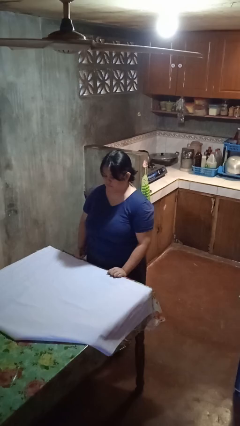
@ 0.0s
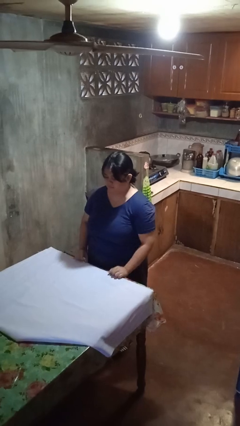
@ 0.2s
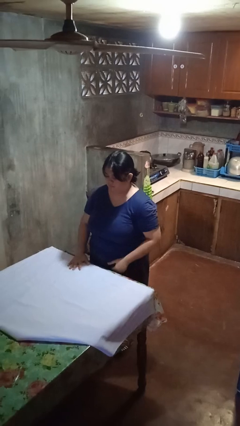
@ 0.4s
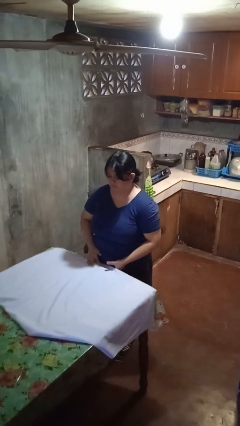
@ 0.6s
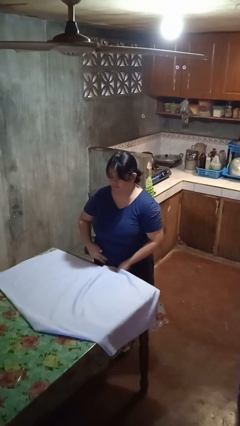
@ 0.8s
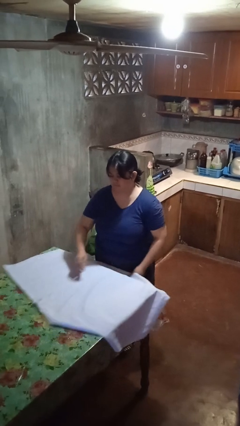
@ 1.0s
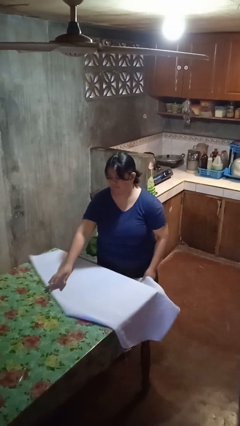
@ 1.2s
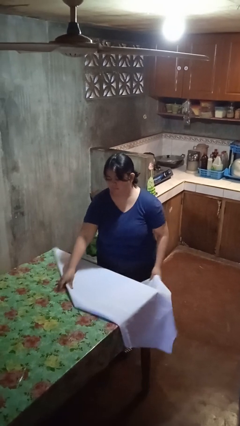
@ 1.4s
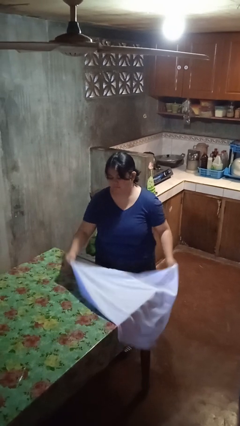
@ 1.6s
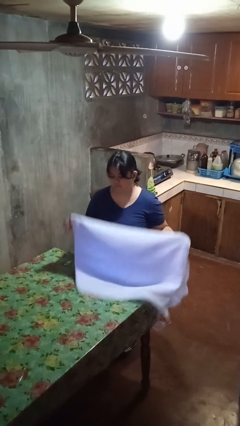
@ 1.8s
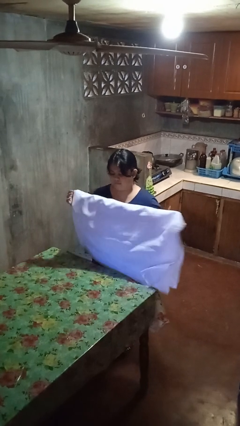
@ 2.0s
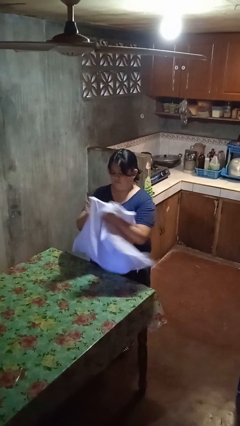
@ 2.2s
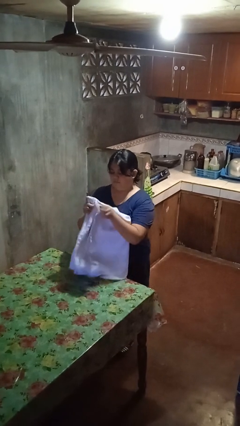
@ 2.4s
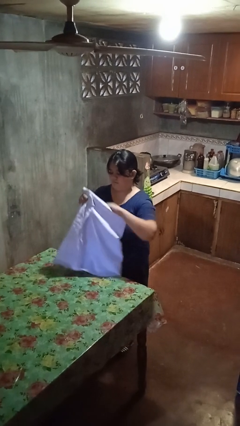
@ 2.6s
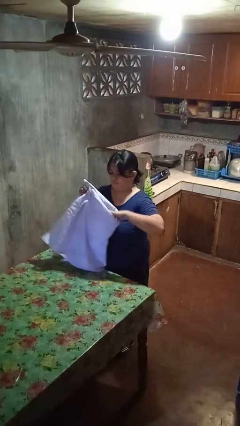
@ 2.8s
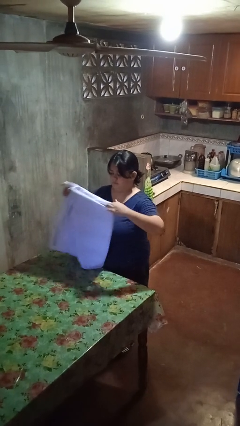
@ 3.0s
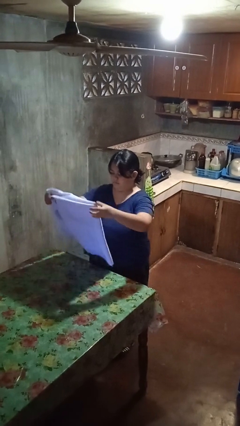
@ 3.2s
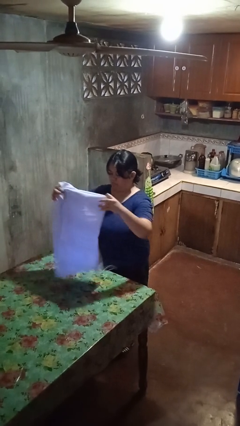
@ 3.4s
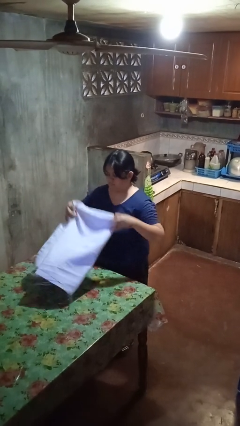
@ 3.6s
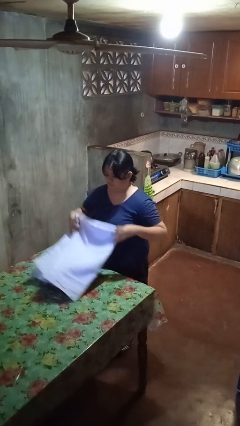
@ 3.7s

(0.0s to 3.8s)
person folds tablecloth

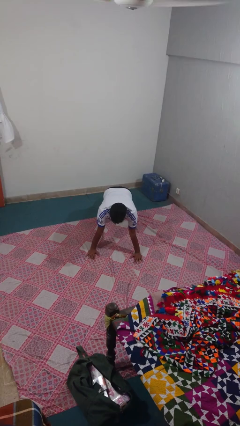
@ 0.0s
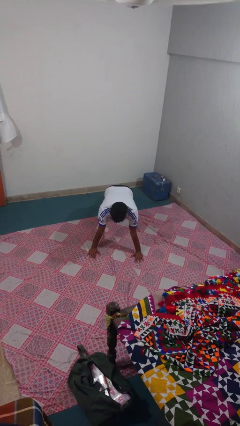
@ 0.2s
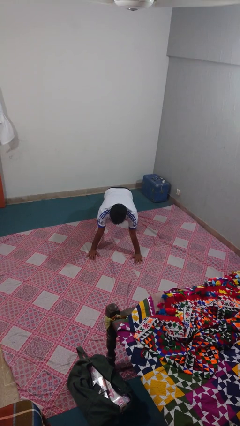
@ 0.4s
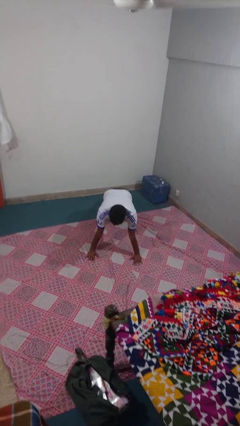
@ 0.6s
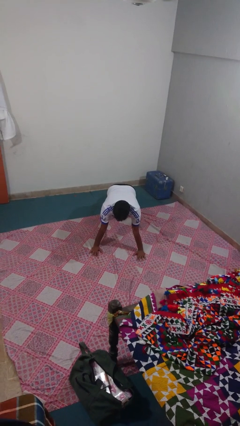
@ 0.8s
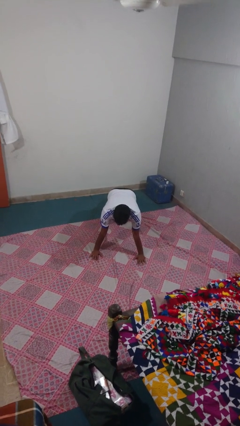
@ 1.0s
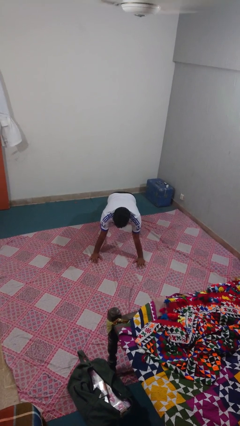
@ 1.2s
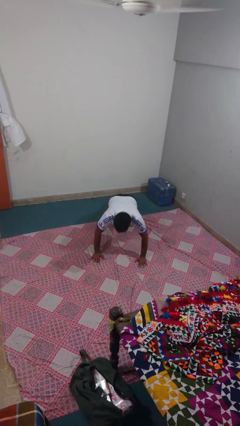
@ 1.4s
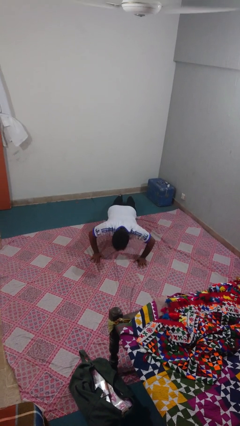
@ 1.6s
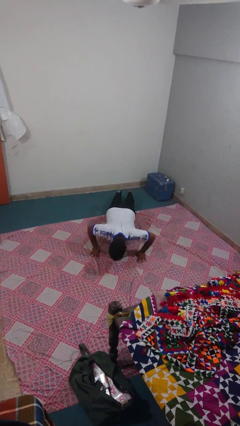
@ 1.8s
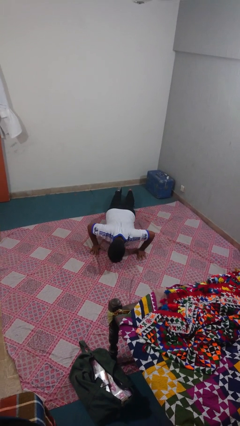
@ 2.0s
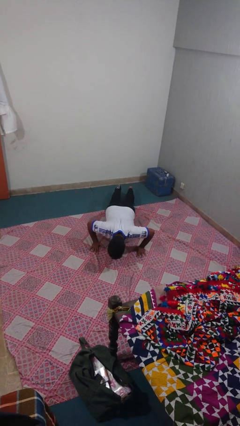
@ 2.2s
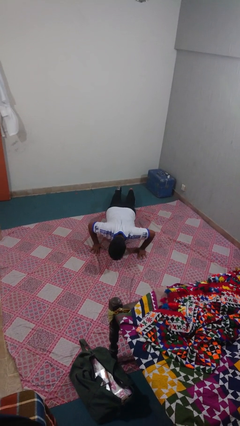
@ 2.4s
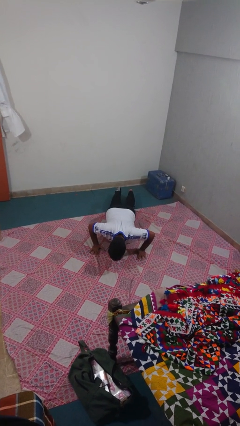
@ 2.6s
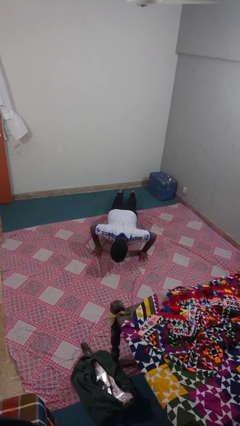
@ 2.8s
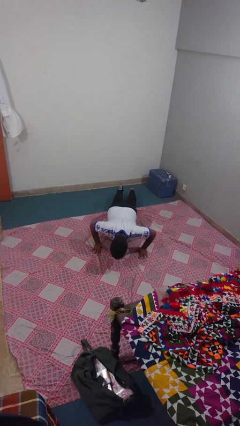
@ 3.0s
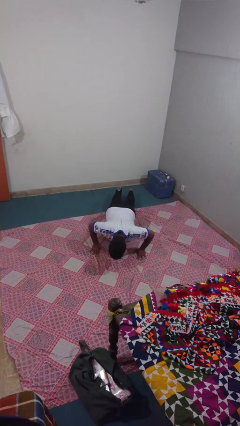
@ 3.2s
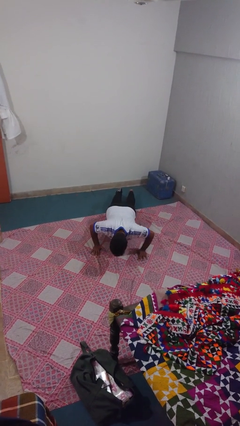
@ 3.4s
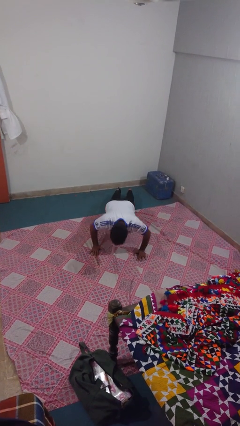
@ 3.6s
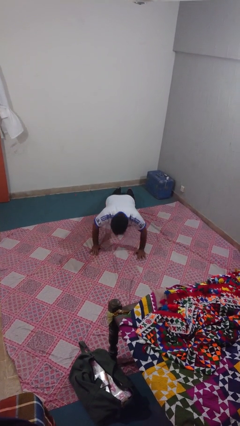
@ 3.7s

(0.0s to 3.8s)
person exercises with pushup

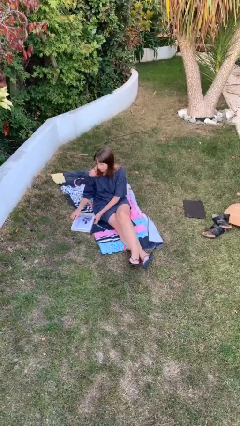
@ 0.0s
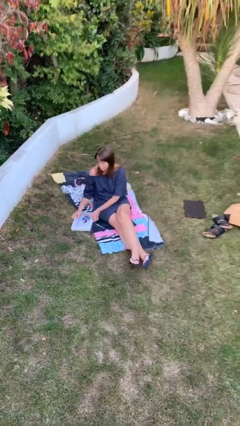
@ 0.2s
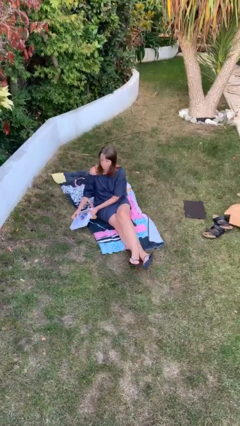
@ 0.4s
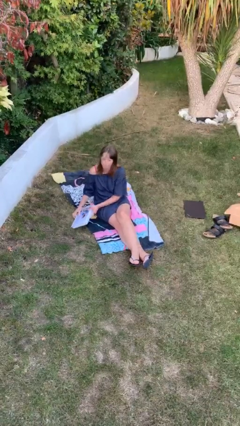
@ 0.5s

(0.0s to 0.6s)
person picks up object from floor

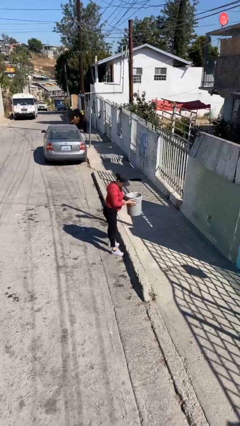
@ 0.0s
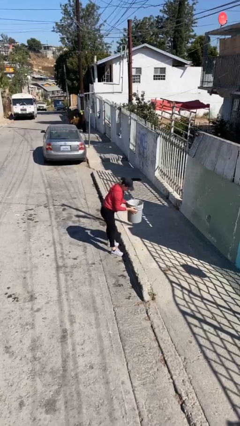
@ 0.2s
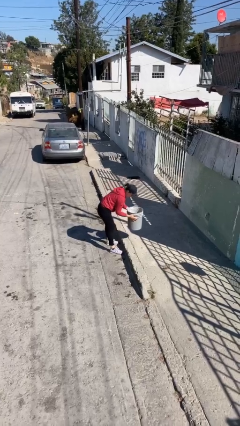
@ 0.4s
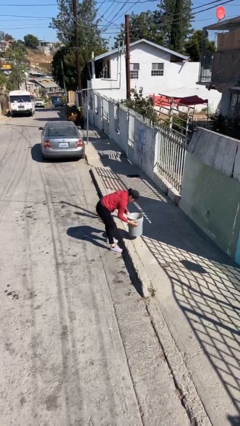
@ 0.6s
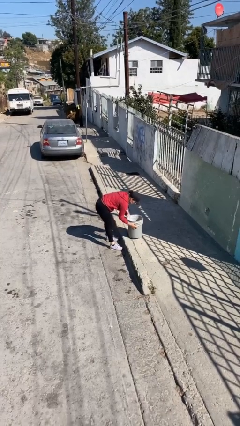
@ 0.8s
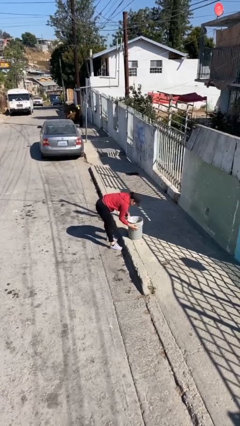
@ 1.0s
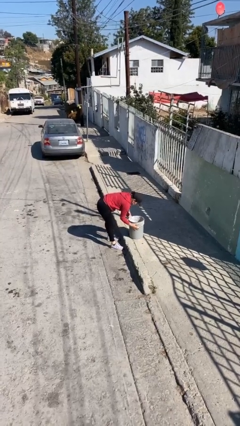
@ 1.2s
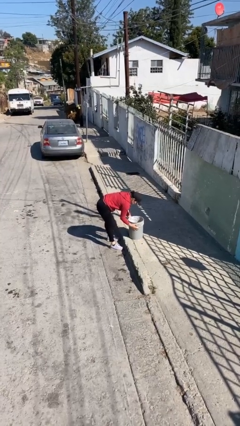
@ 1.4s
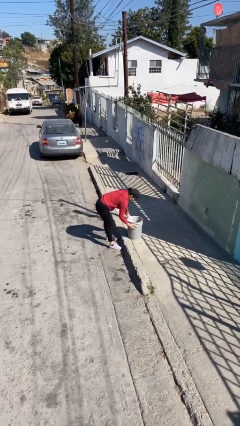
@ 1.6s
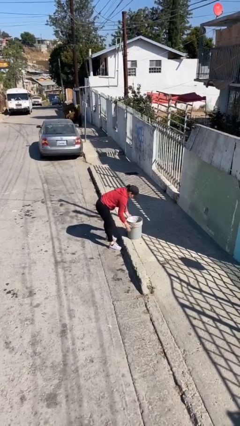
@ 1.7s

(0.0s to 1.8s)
person puts down object on floor

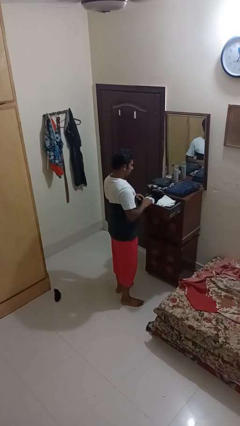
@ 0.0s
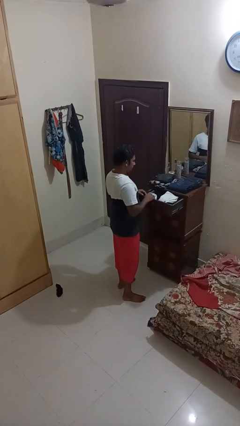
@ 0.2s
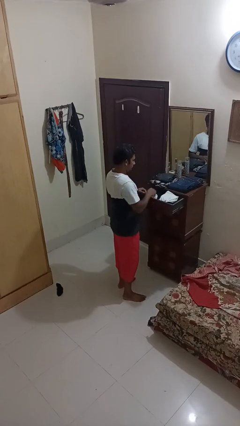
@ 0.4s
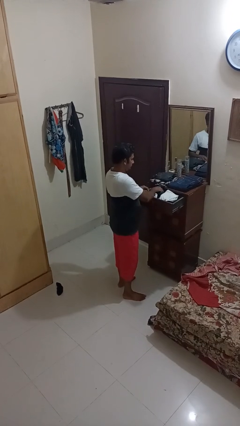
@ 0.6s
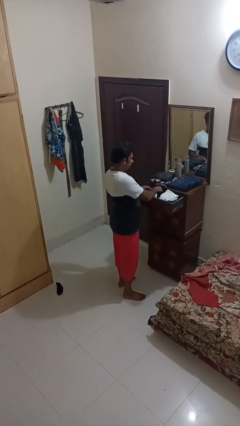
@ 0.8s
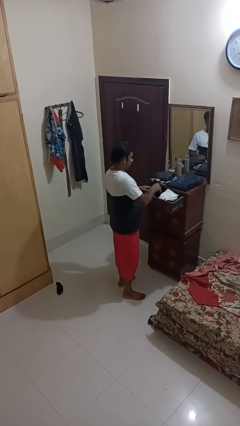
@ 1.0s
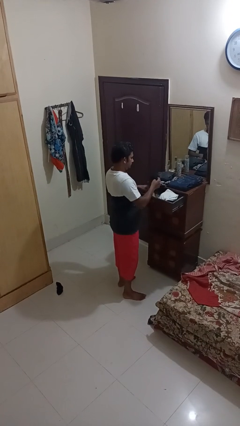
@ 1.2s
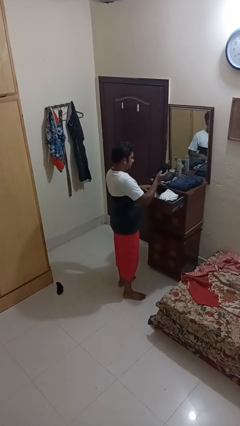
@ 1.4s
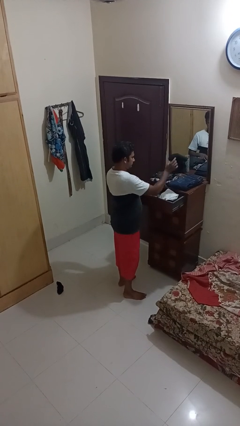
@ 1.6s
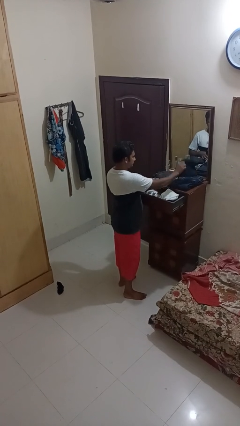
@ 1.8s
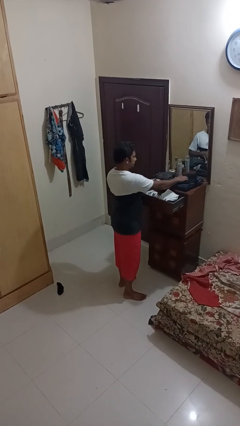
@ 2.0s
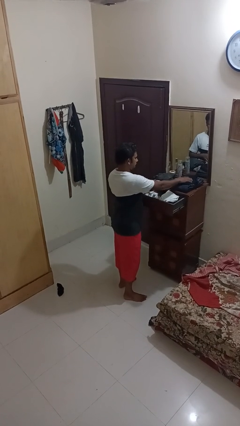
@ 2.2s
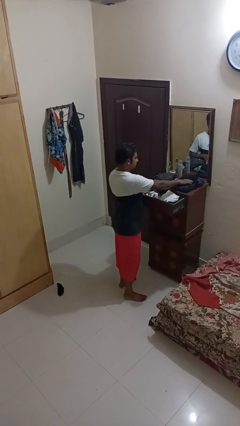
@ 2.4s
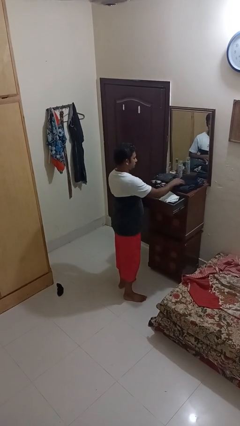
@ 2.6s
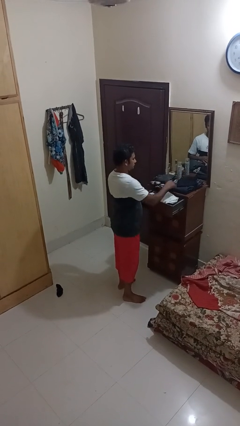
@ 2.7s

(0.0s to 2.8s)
person takes clothes from dresser

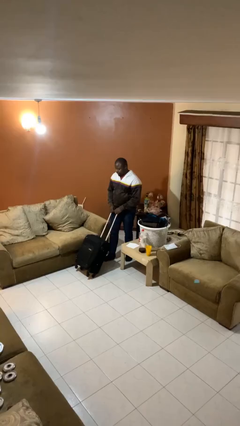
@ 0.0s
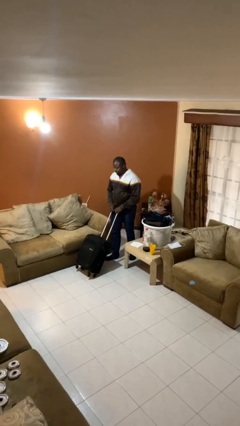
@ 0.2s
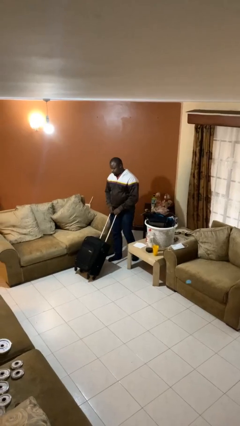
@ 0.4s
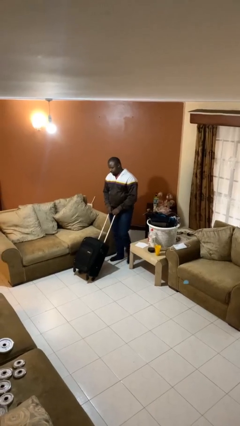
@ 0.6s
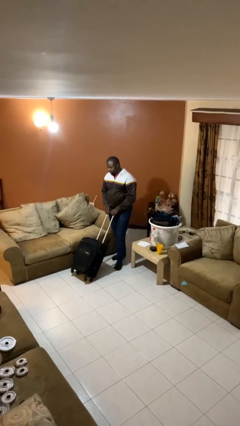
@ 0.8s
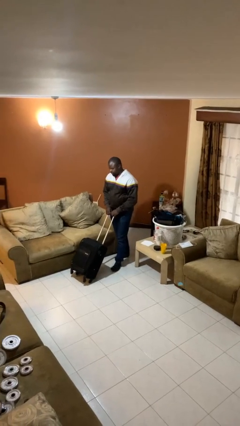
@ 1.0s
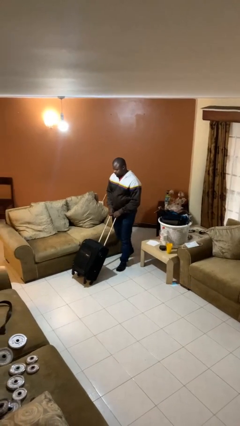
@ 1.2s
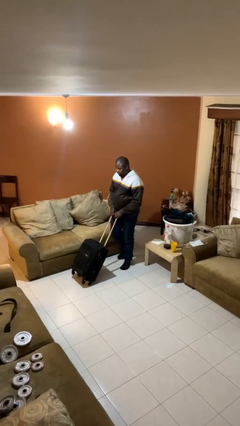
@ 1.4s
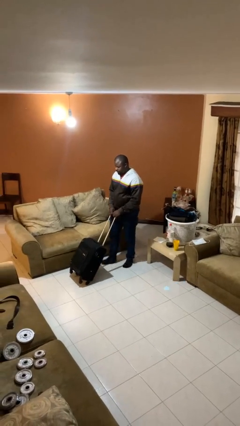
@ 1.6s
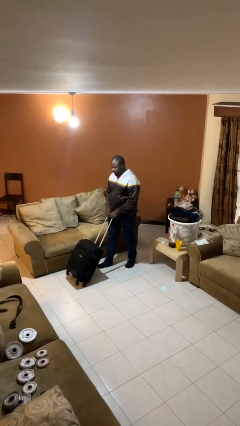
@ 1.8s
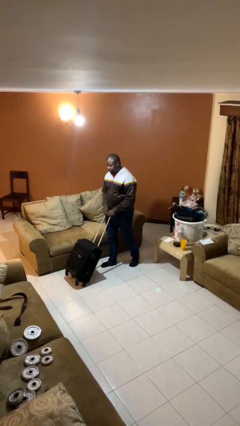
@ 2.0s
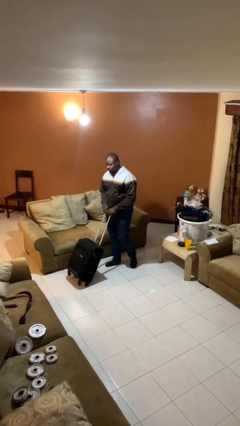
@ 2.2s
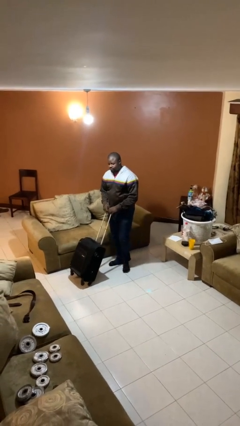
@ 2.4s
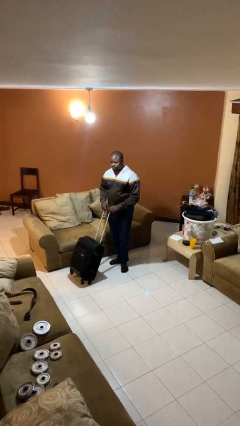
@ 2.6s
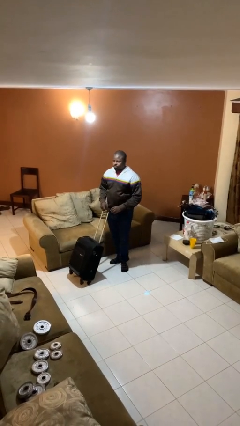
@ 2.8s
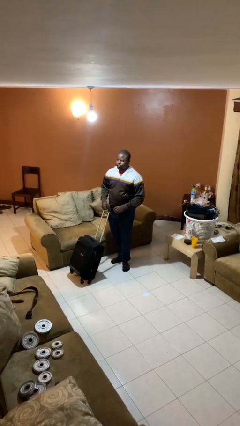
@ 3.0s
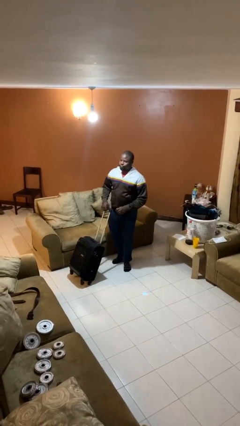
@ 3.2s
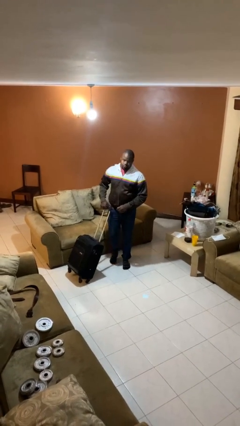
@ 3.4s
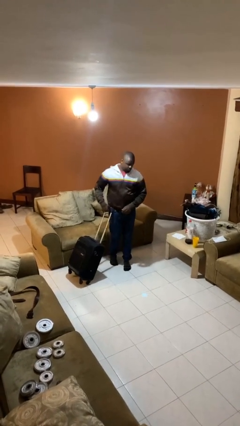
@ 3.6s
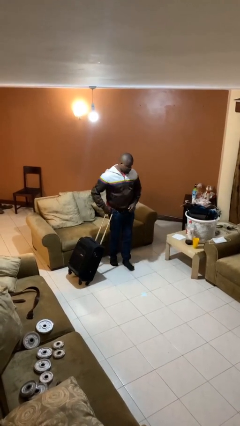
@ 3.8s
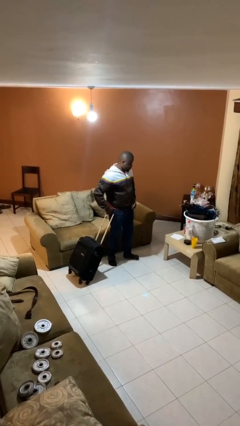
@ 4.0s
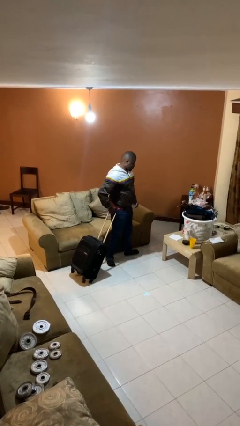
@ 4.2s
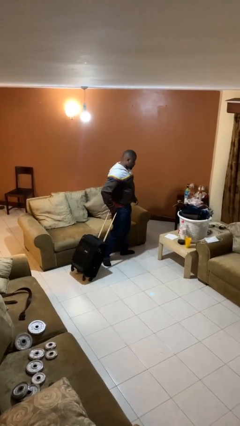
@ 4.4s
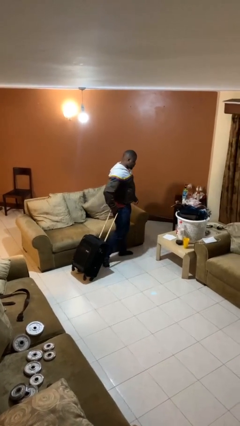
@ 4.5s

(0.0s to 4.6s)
person pushes wheeled cart
